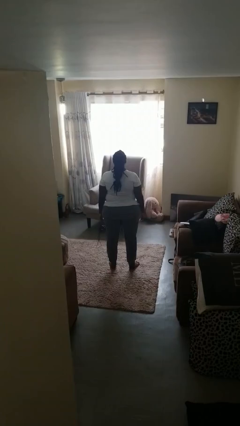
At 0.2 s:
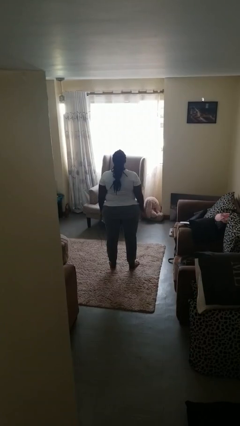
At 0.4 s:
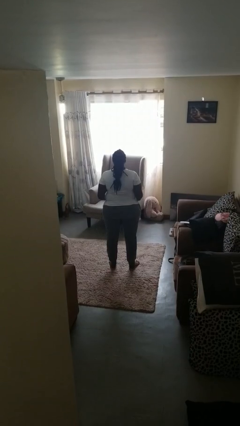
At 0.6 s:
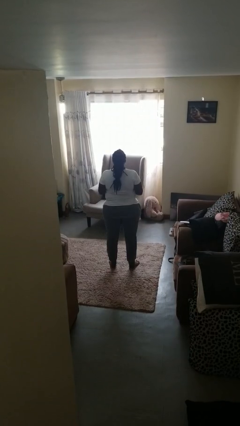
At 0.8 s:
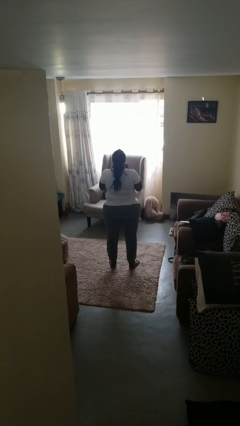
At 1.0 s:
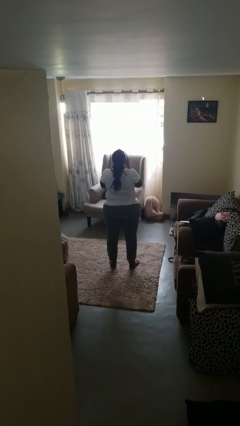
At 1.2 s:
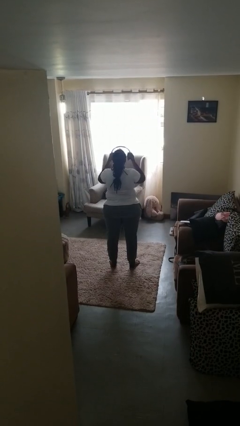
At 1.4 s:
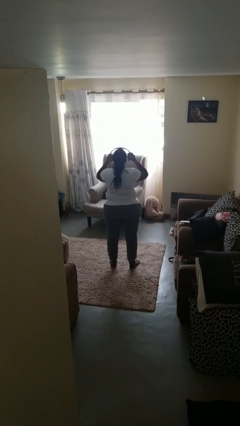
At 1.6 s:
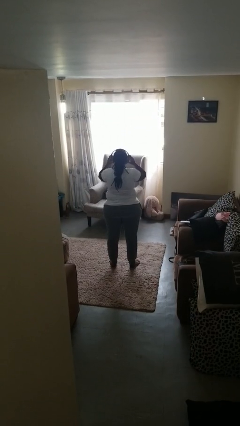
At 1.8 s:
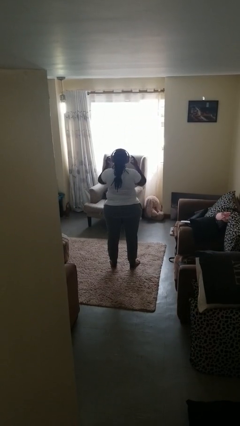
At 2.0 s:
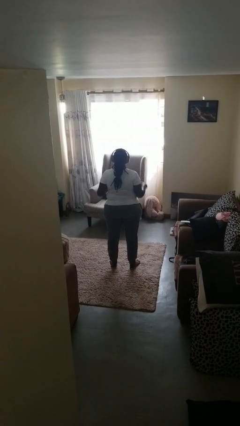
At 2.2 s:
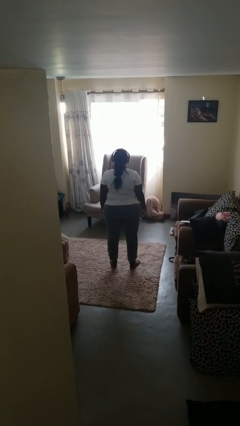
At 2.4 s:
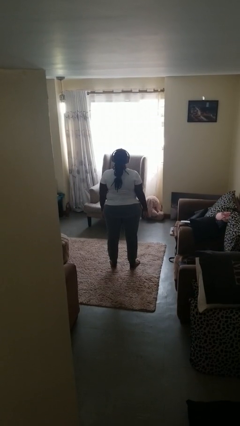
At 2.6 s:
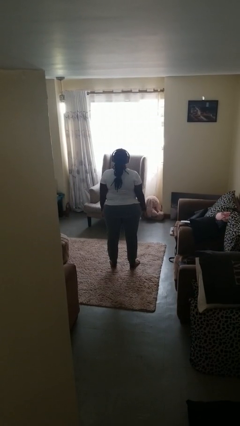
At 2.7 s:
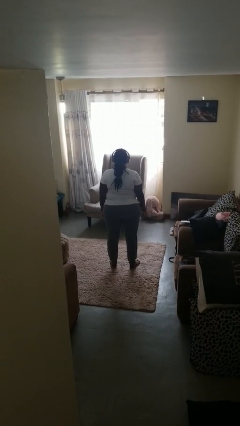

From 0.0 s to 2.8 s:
person puts on headphones

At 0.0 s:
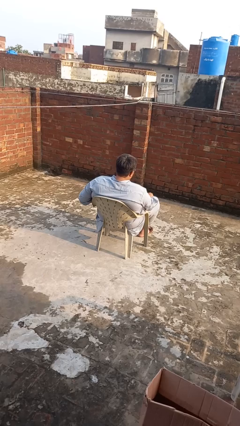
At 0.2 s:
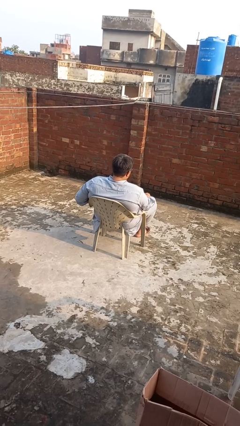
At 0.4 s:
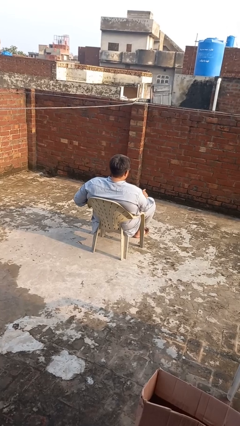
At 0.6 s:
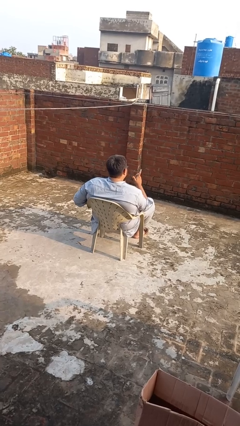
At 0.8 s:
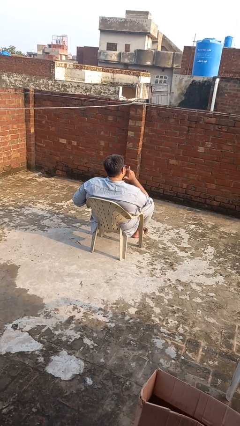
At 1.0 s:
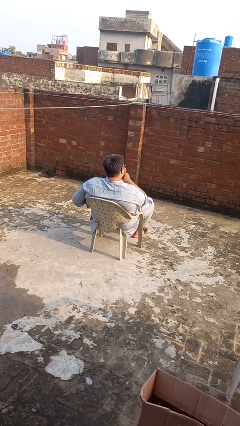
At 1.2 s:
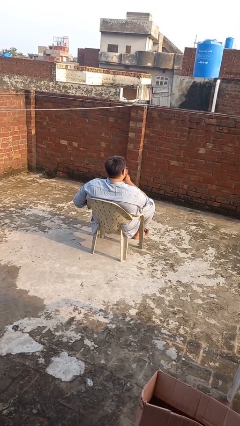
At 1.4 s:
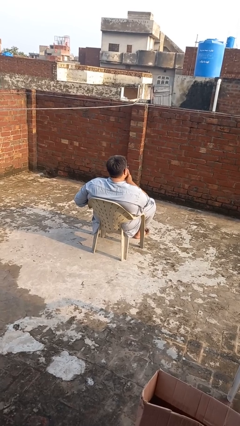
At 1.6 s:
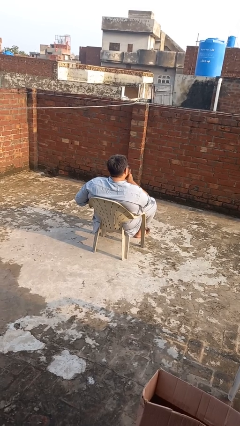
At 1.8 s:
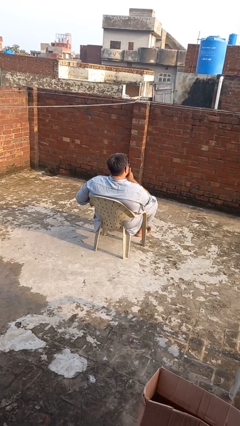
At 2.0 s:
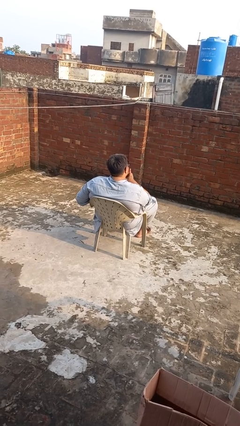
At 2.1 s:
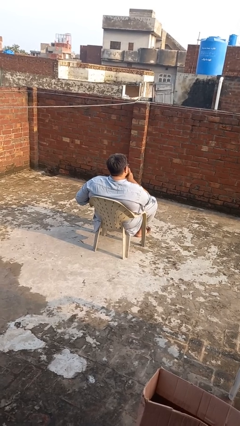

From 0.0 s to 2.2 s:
person strokes chin

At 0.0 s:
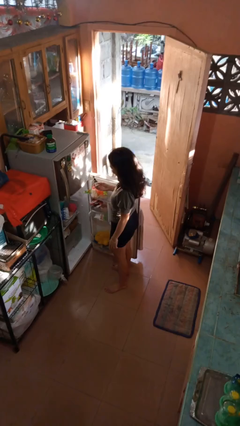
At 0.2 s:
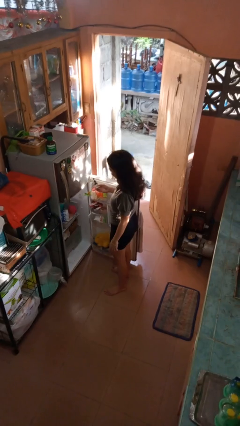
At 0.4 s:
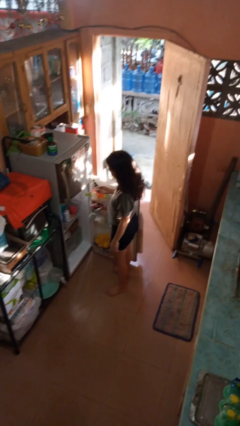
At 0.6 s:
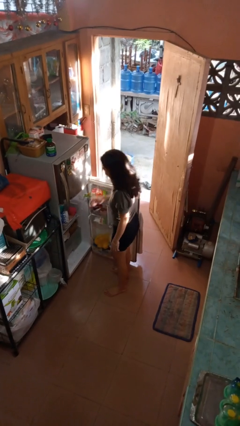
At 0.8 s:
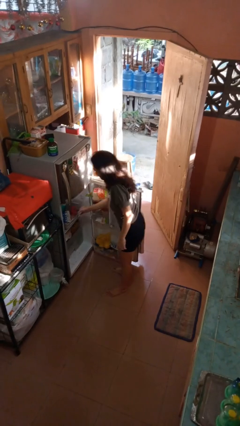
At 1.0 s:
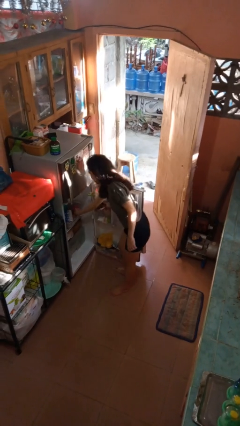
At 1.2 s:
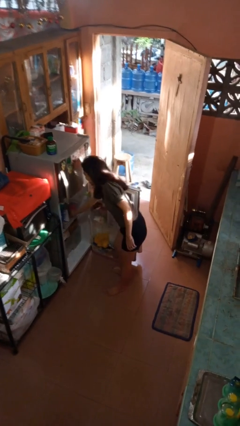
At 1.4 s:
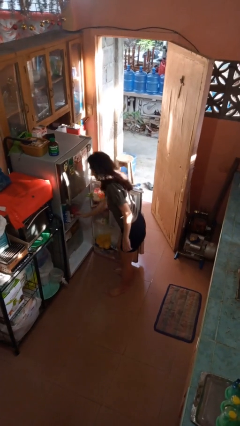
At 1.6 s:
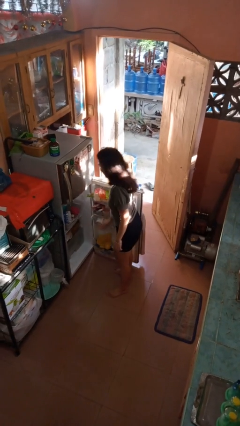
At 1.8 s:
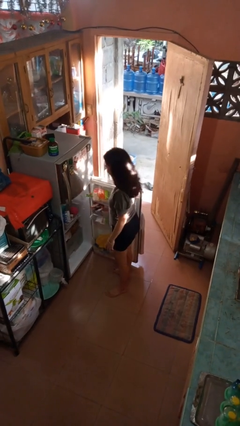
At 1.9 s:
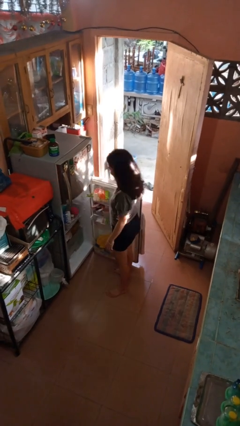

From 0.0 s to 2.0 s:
person puts object into refrigerator

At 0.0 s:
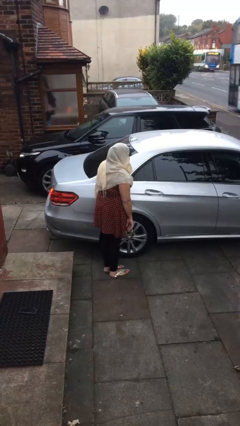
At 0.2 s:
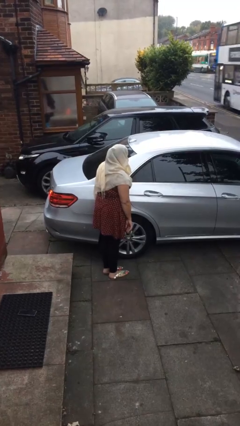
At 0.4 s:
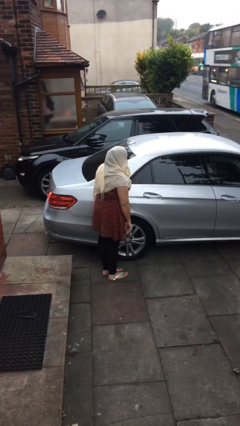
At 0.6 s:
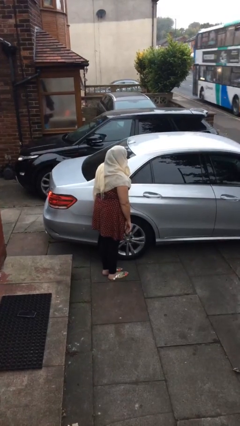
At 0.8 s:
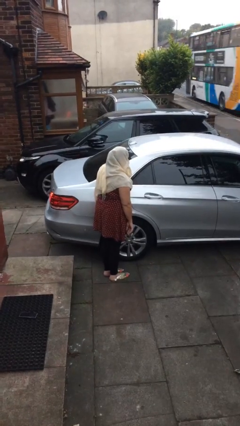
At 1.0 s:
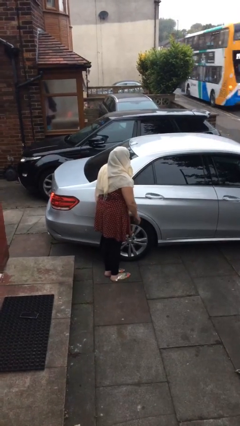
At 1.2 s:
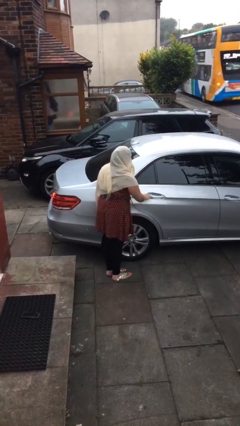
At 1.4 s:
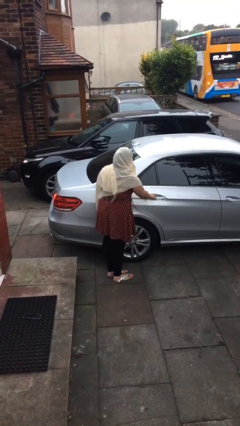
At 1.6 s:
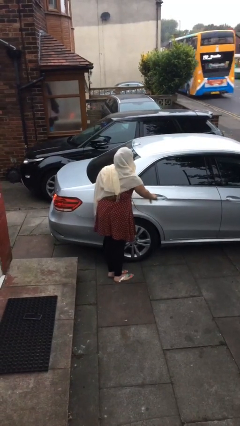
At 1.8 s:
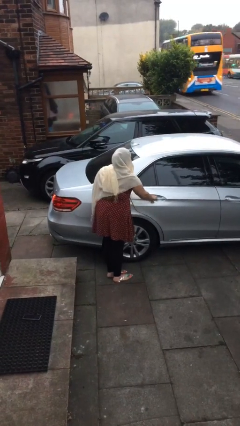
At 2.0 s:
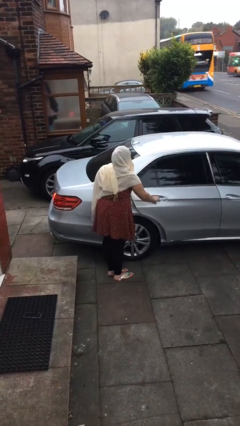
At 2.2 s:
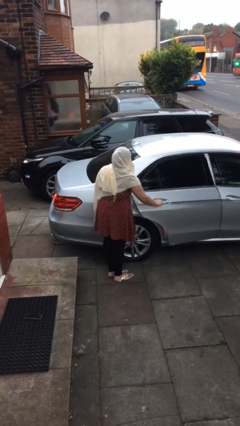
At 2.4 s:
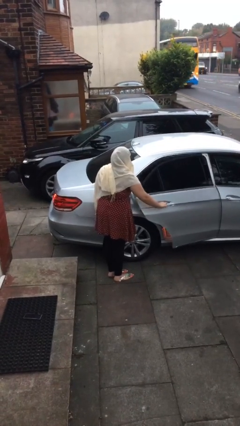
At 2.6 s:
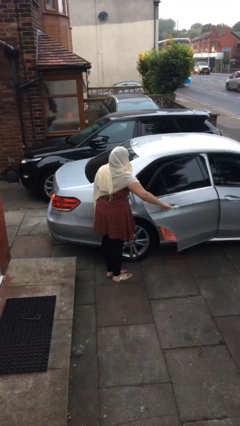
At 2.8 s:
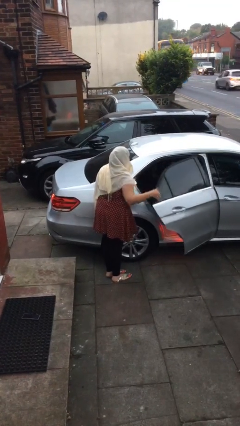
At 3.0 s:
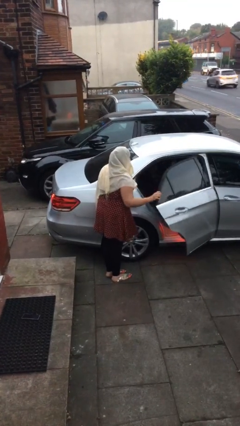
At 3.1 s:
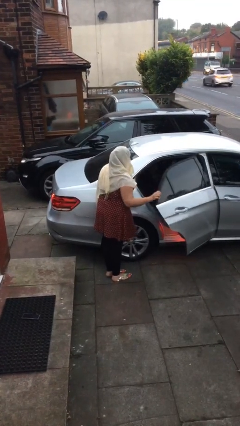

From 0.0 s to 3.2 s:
person opens car door

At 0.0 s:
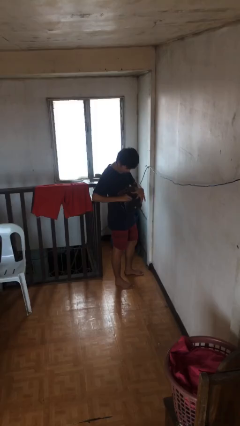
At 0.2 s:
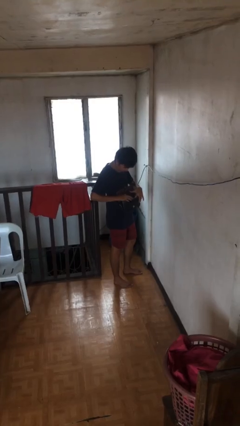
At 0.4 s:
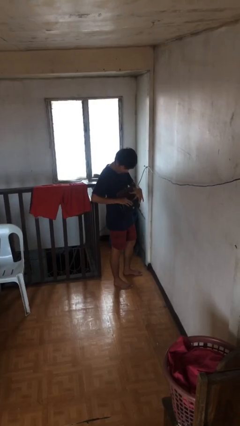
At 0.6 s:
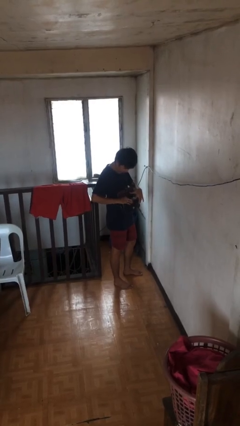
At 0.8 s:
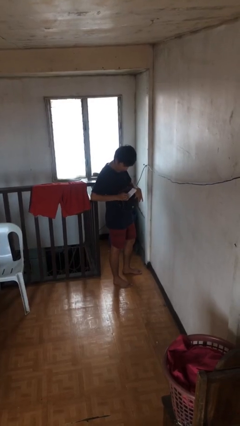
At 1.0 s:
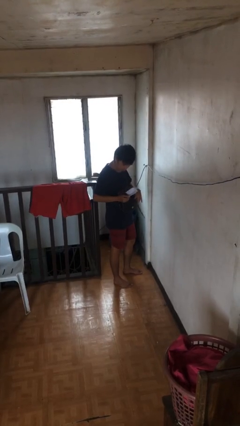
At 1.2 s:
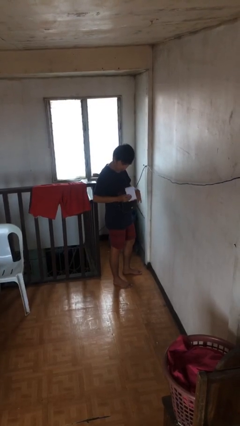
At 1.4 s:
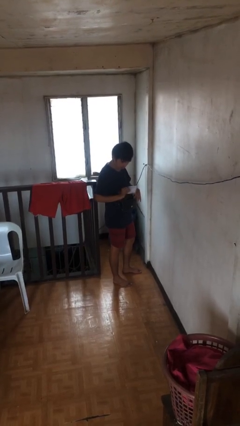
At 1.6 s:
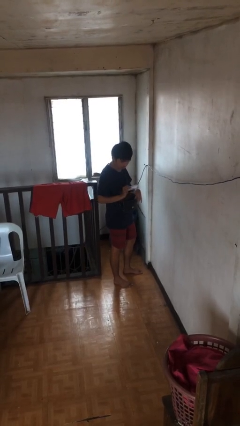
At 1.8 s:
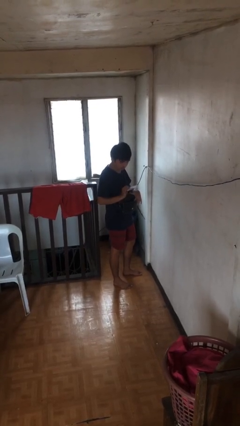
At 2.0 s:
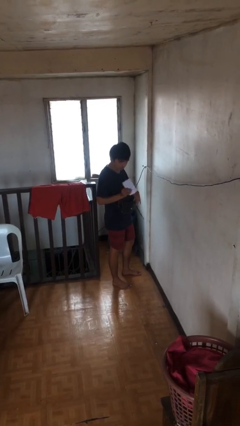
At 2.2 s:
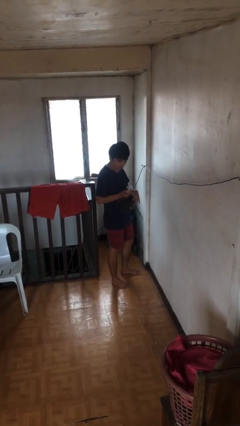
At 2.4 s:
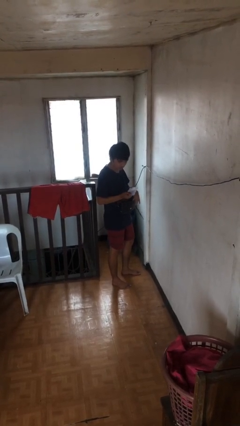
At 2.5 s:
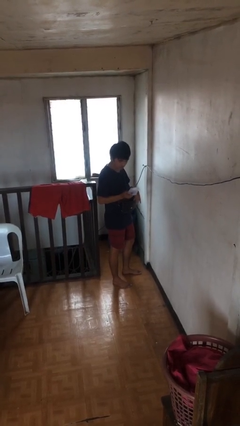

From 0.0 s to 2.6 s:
person takes object from purse

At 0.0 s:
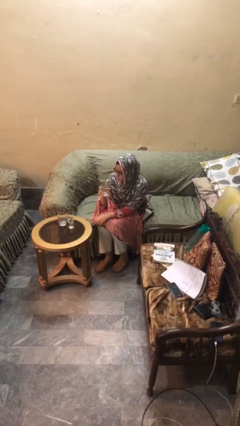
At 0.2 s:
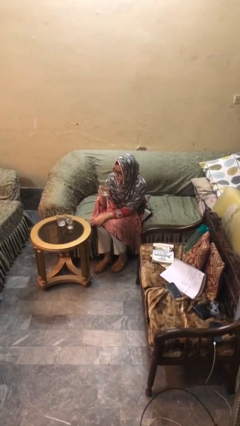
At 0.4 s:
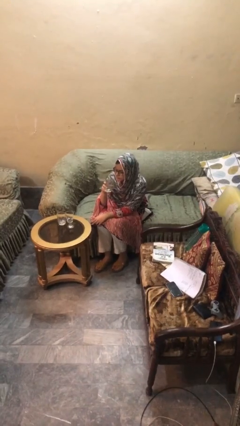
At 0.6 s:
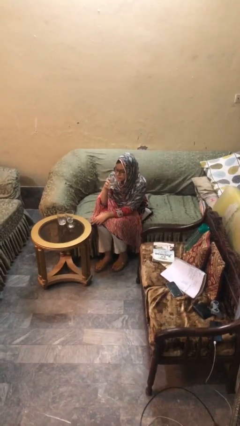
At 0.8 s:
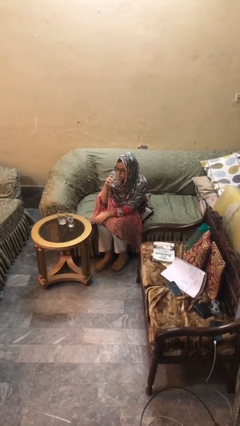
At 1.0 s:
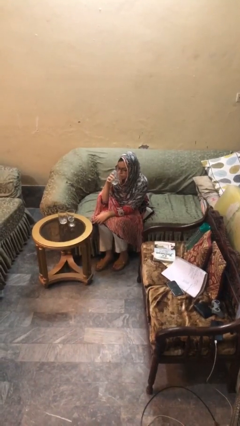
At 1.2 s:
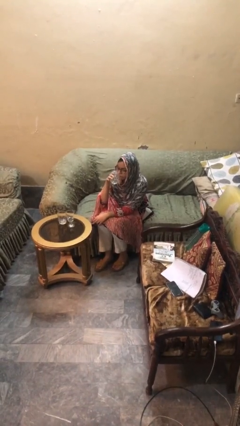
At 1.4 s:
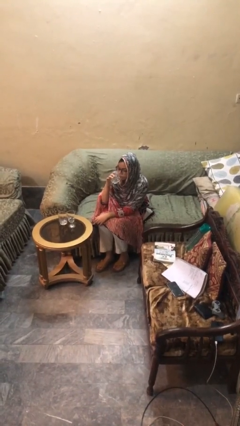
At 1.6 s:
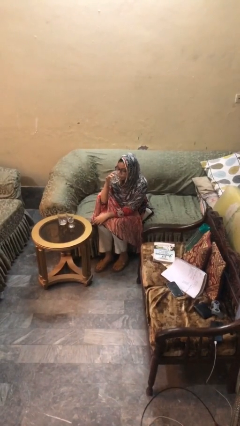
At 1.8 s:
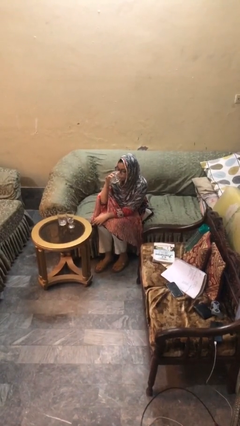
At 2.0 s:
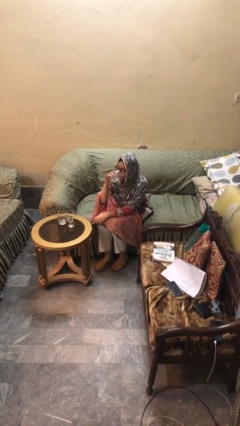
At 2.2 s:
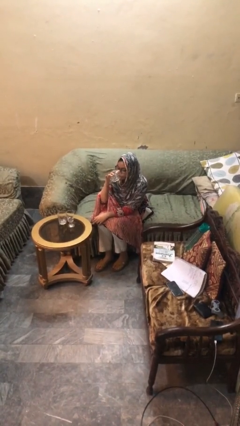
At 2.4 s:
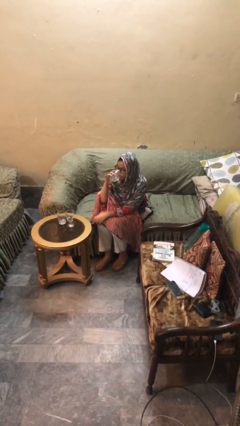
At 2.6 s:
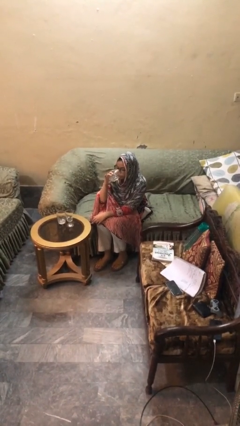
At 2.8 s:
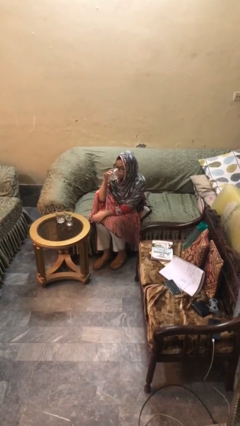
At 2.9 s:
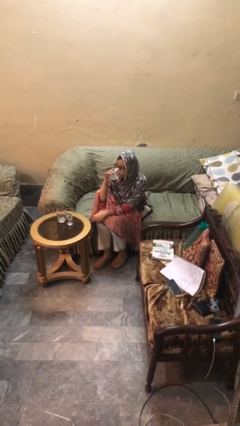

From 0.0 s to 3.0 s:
person drinks from shotglass

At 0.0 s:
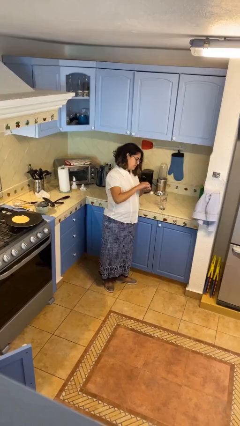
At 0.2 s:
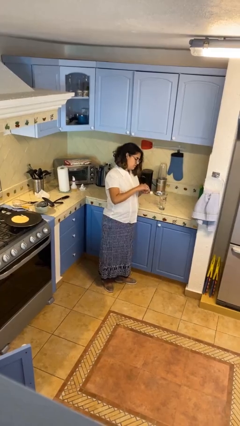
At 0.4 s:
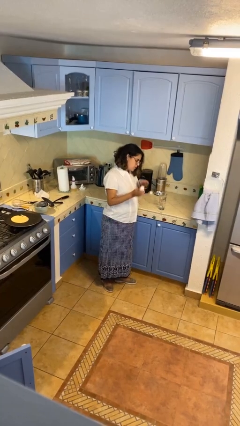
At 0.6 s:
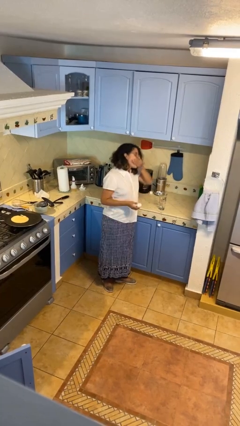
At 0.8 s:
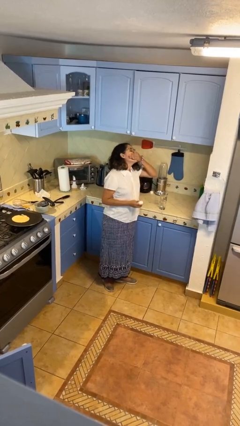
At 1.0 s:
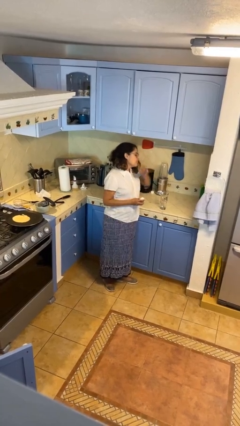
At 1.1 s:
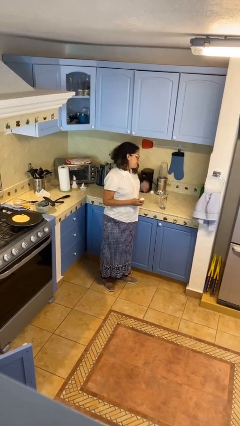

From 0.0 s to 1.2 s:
person takes medicine pills

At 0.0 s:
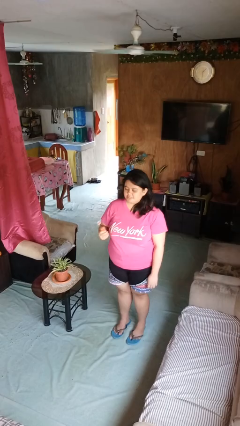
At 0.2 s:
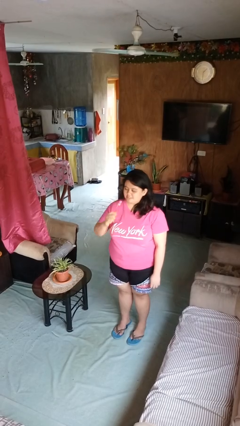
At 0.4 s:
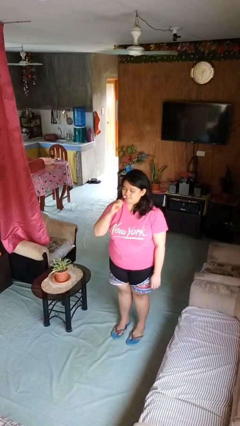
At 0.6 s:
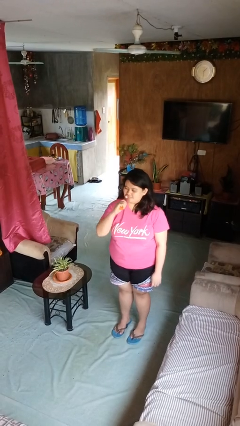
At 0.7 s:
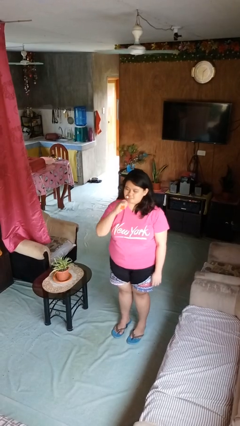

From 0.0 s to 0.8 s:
person brushes teeth
